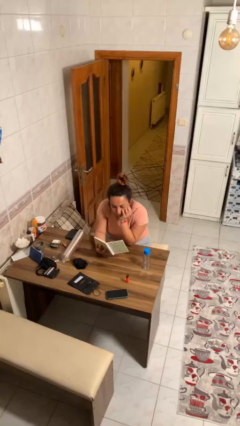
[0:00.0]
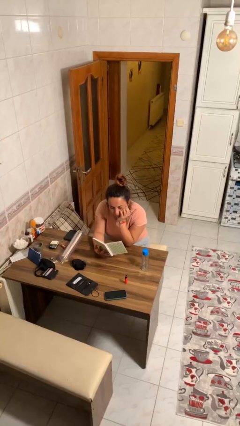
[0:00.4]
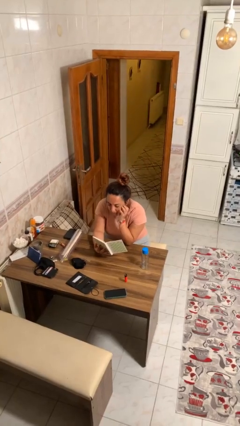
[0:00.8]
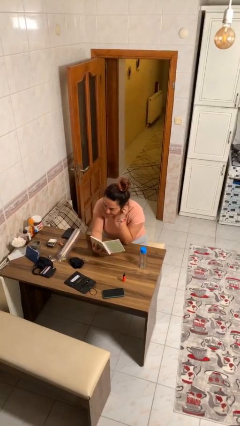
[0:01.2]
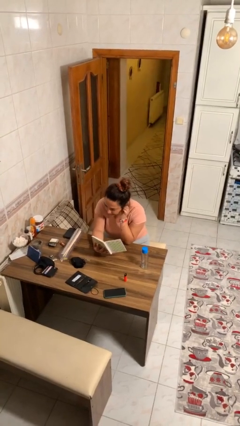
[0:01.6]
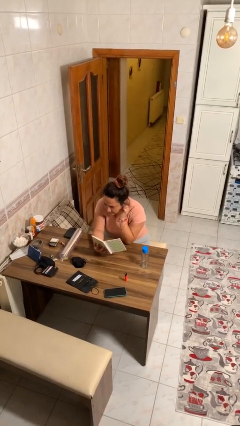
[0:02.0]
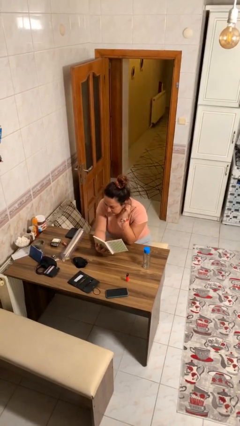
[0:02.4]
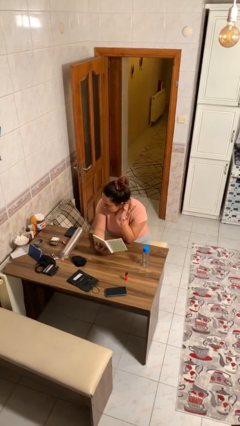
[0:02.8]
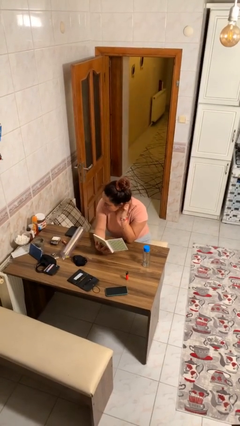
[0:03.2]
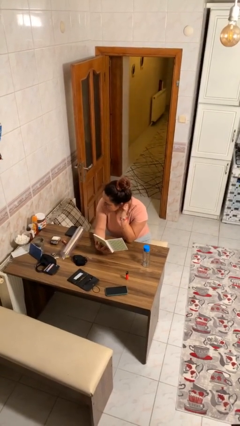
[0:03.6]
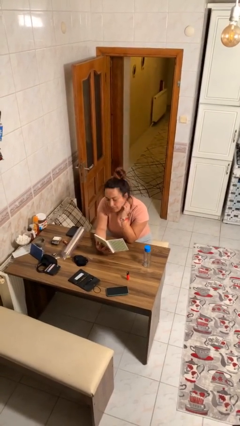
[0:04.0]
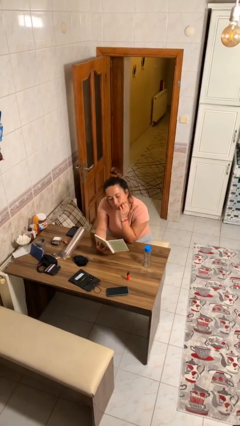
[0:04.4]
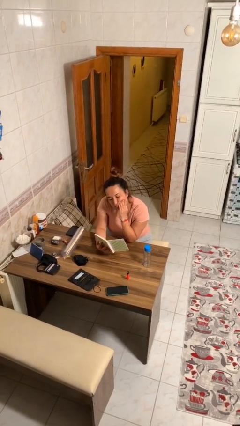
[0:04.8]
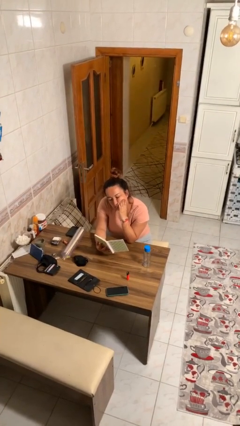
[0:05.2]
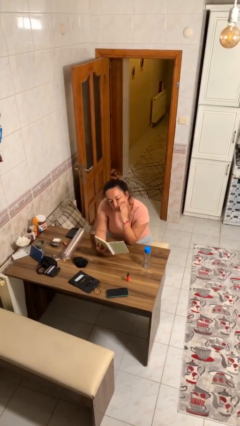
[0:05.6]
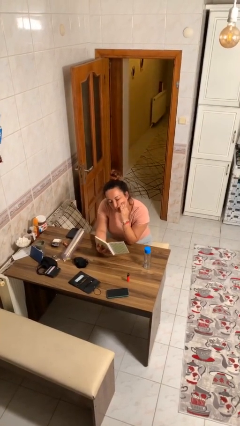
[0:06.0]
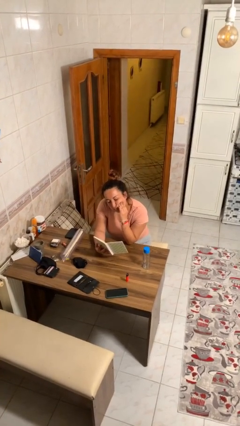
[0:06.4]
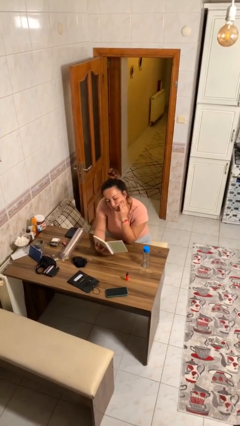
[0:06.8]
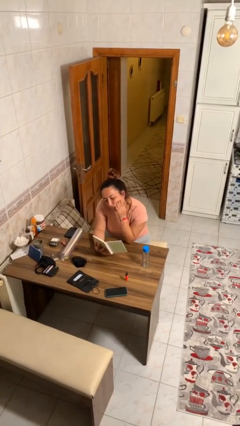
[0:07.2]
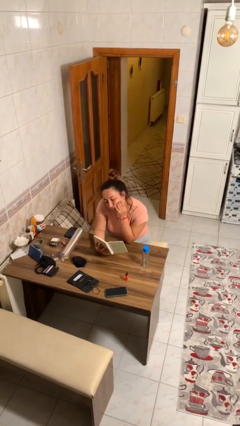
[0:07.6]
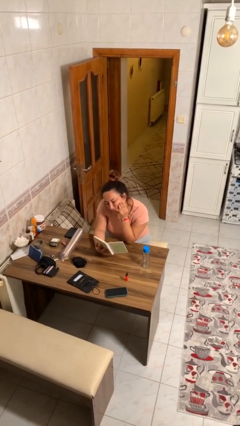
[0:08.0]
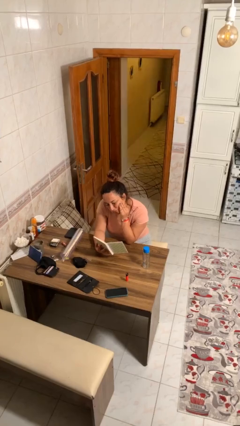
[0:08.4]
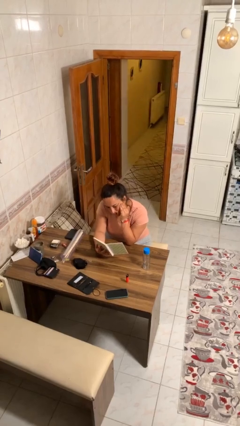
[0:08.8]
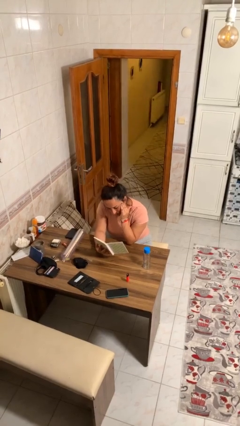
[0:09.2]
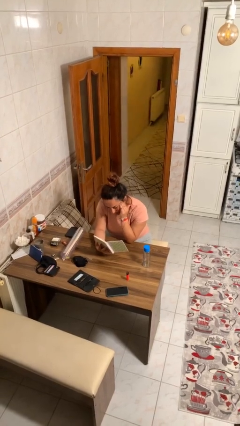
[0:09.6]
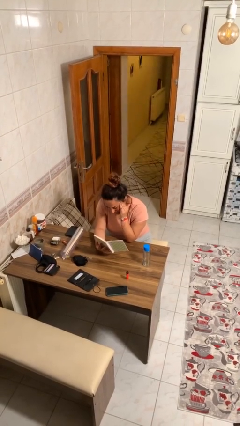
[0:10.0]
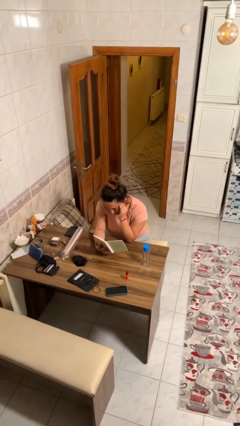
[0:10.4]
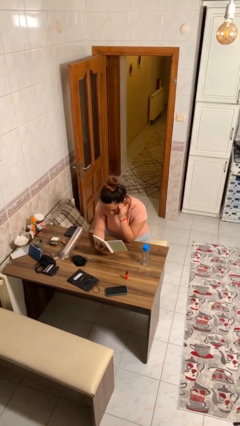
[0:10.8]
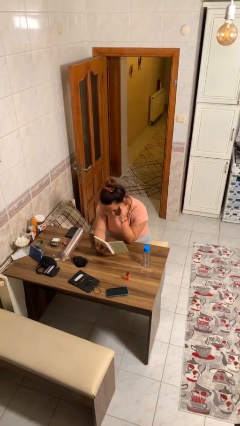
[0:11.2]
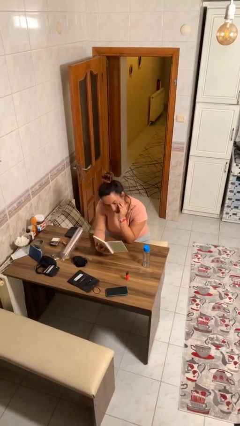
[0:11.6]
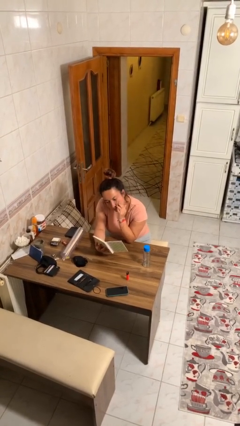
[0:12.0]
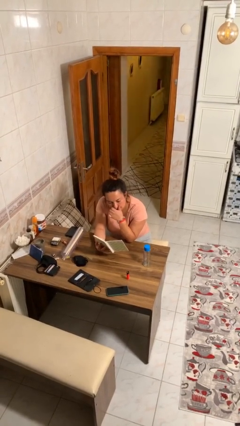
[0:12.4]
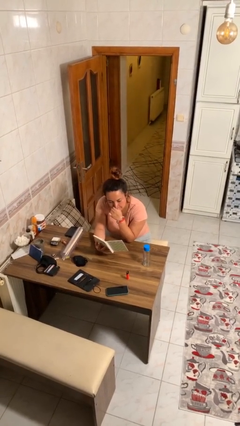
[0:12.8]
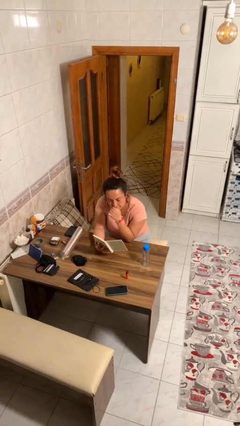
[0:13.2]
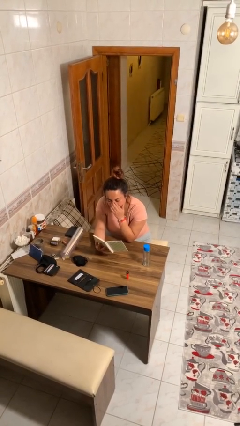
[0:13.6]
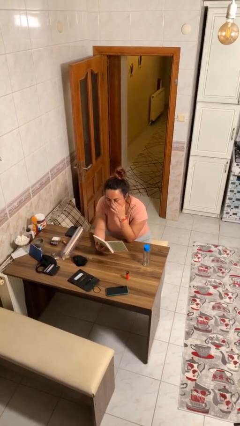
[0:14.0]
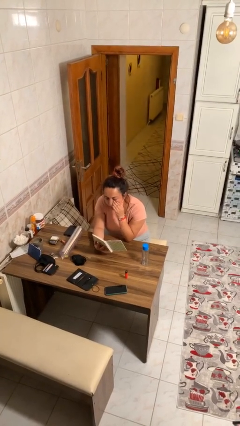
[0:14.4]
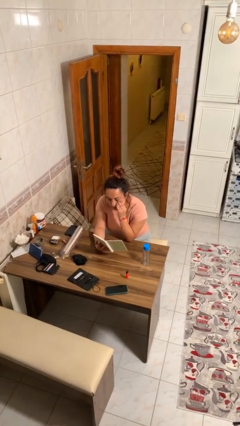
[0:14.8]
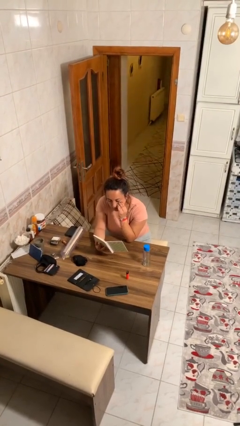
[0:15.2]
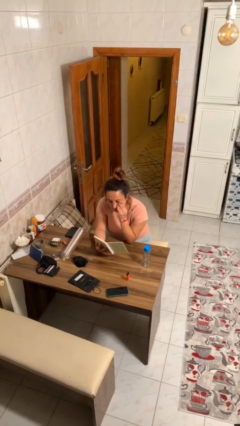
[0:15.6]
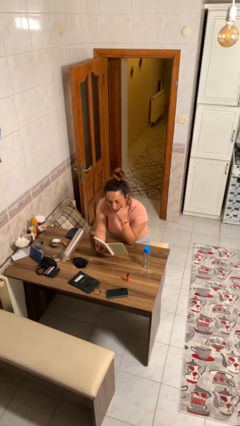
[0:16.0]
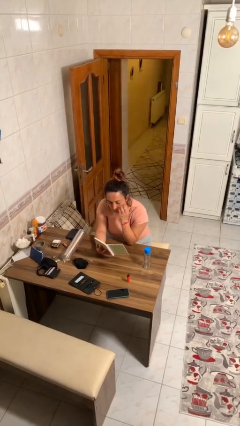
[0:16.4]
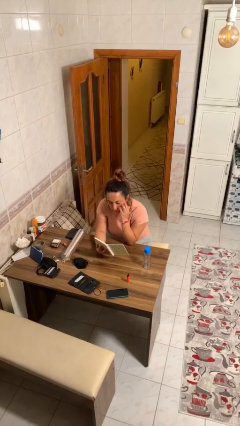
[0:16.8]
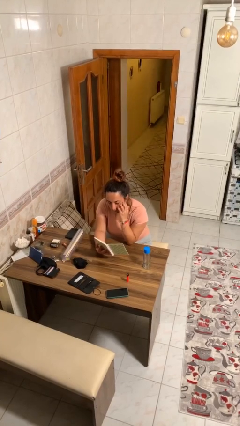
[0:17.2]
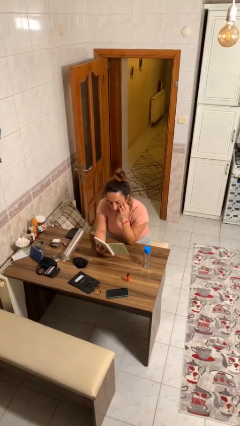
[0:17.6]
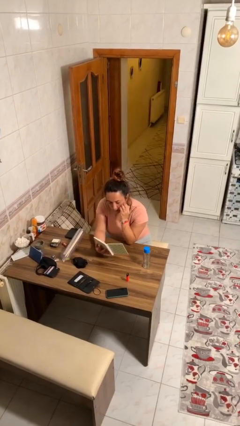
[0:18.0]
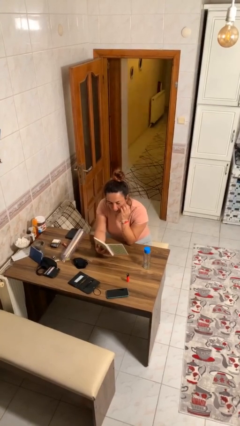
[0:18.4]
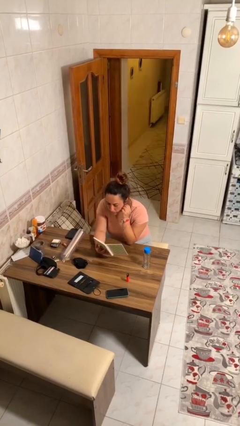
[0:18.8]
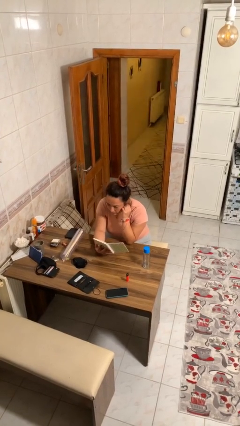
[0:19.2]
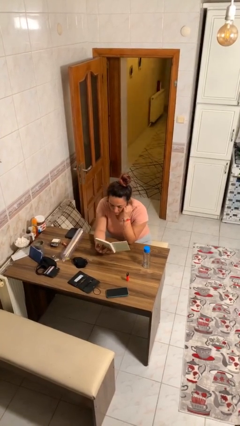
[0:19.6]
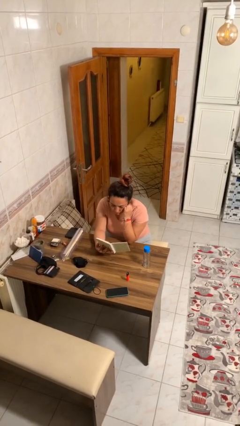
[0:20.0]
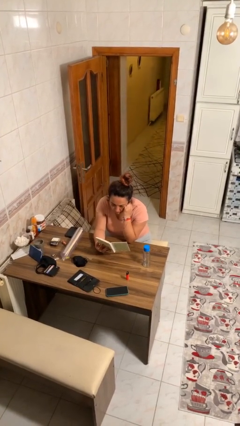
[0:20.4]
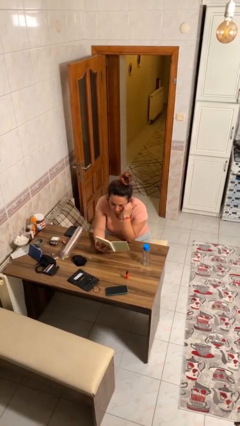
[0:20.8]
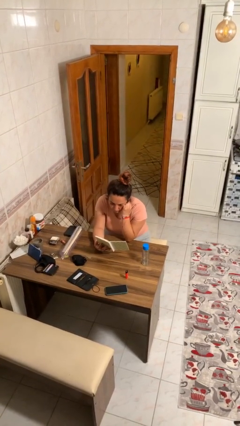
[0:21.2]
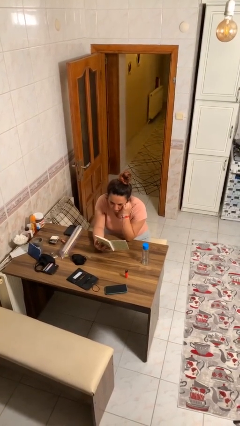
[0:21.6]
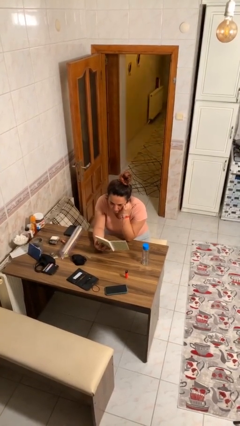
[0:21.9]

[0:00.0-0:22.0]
person reads document

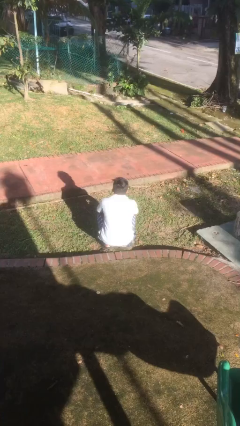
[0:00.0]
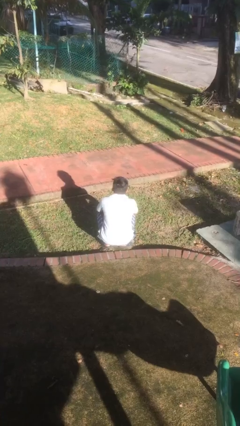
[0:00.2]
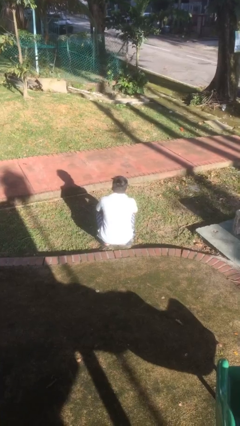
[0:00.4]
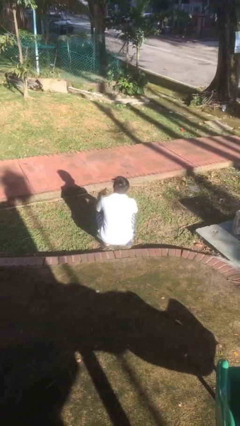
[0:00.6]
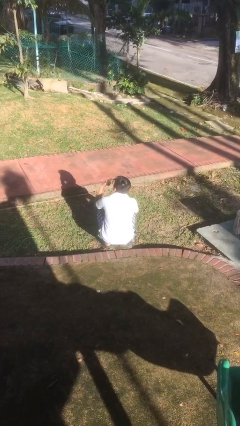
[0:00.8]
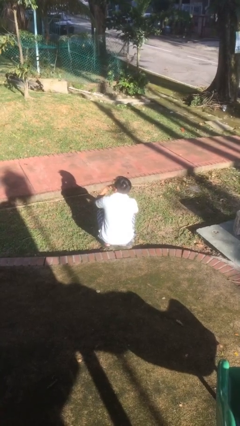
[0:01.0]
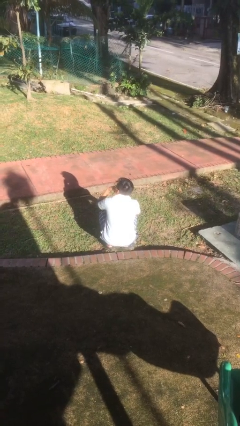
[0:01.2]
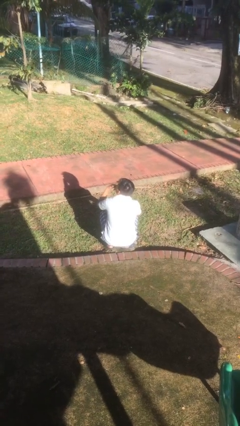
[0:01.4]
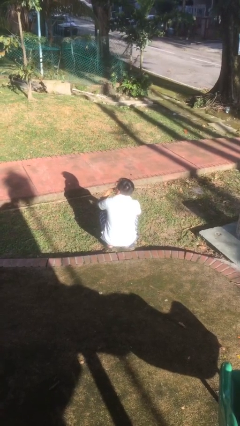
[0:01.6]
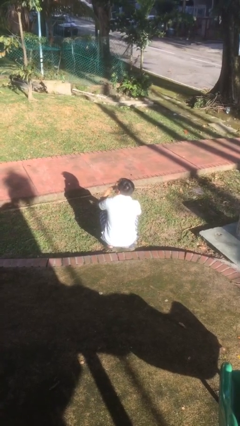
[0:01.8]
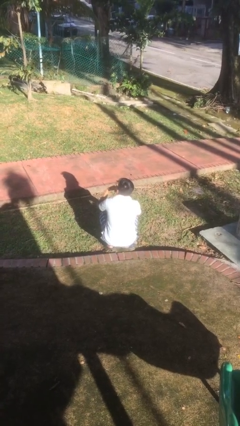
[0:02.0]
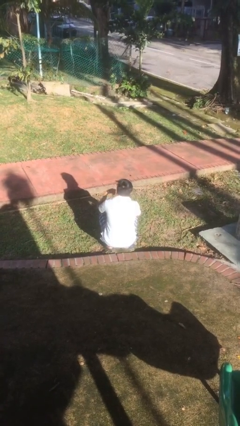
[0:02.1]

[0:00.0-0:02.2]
person strokes chin

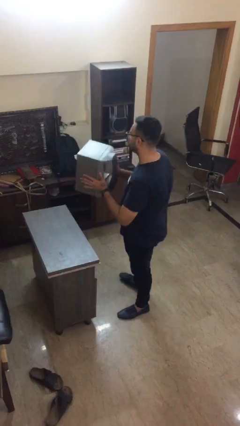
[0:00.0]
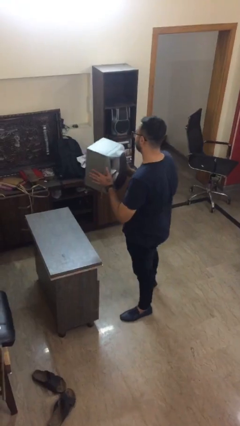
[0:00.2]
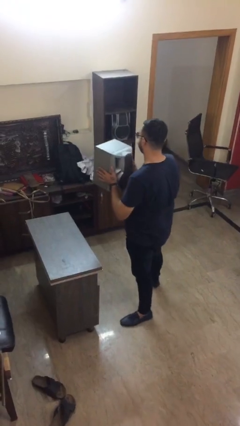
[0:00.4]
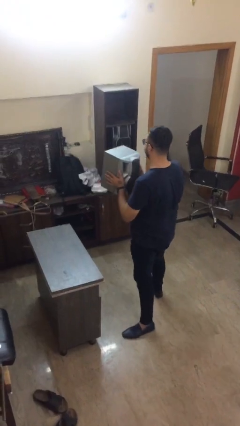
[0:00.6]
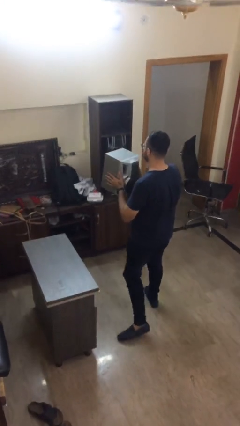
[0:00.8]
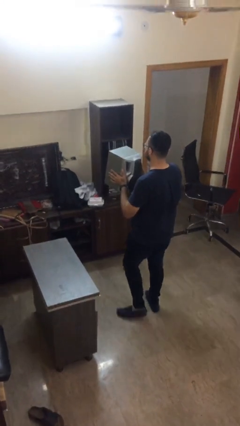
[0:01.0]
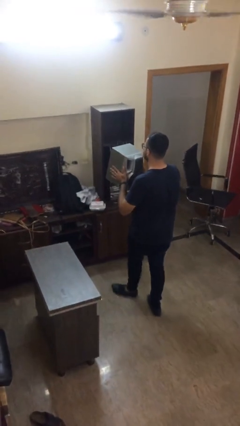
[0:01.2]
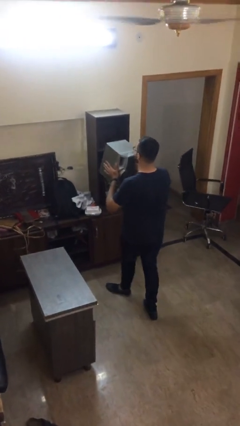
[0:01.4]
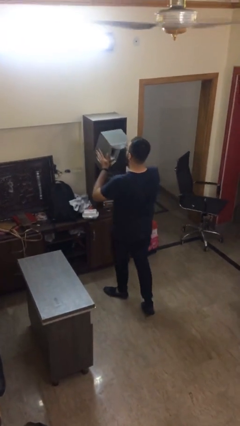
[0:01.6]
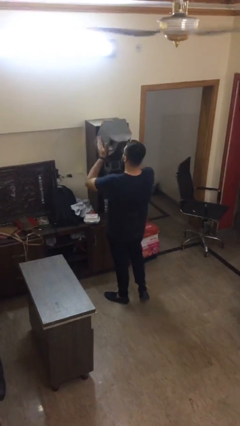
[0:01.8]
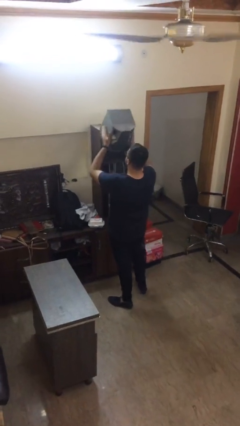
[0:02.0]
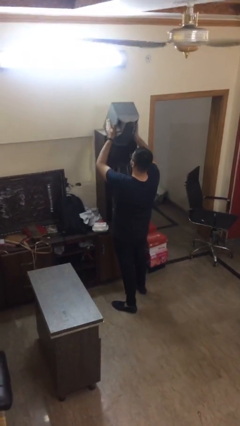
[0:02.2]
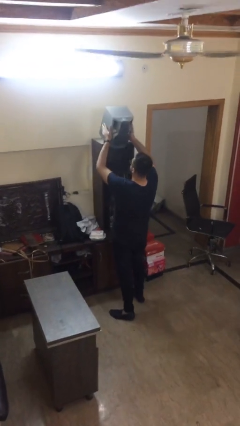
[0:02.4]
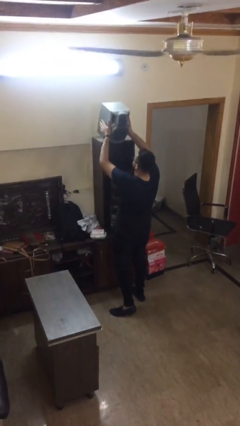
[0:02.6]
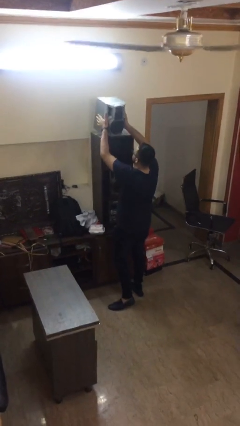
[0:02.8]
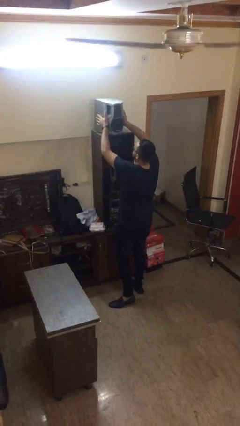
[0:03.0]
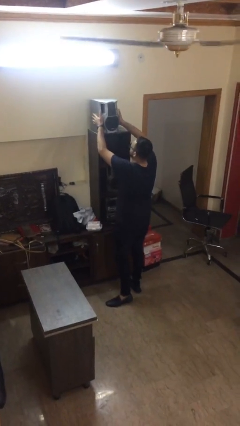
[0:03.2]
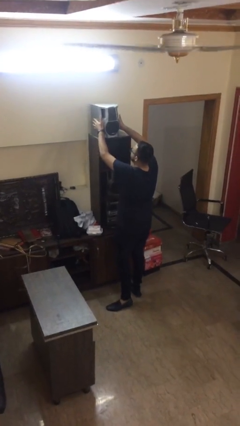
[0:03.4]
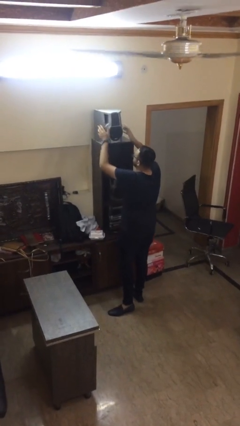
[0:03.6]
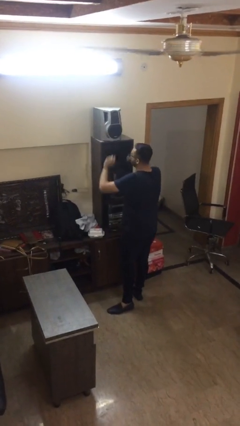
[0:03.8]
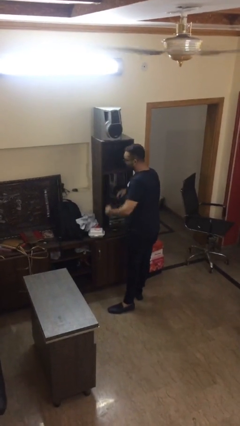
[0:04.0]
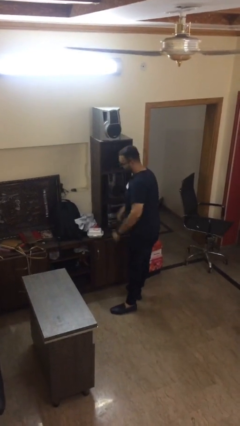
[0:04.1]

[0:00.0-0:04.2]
person puts down object on shelf

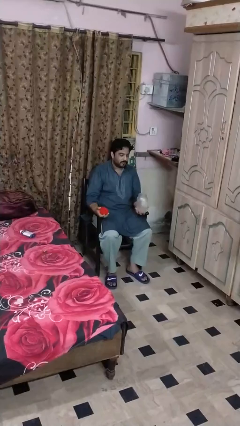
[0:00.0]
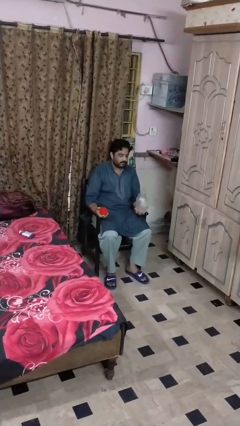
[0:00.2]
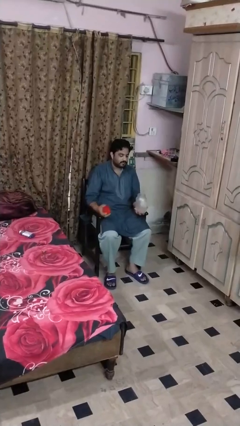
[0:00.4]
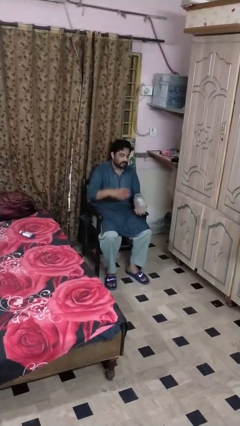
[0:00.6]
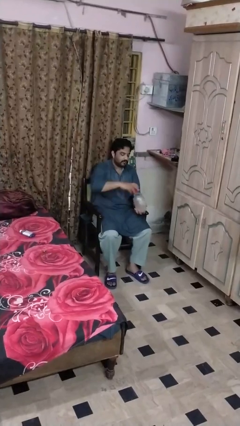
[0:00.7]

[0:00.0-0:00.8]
person closes jar
